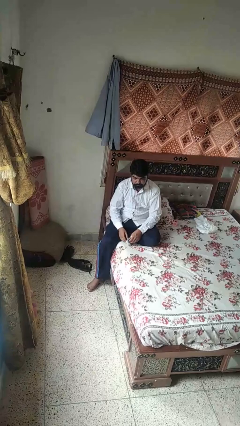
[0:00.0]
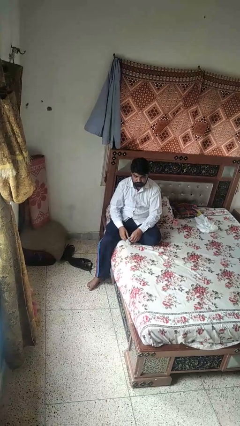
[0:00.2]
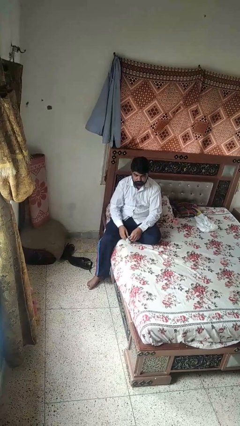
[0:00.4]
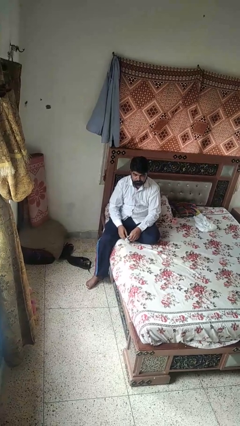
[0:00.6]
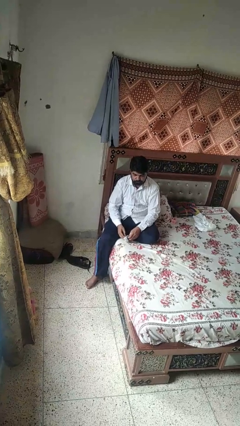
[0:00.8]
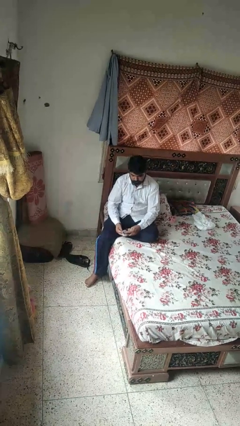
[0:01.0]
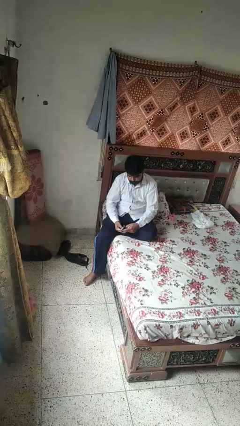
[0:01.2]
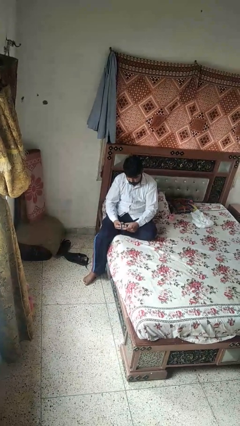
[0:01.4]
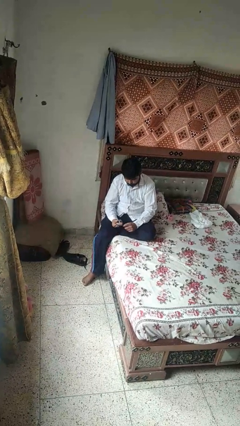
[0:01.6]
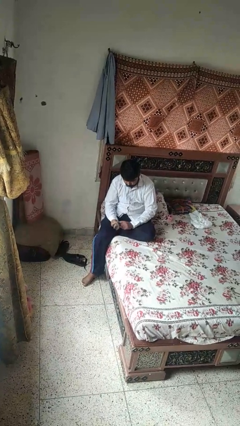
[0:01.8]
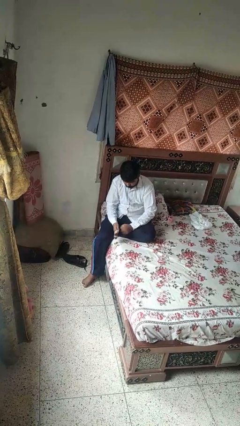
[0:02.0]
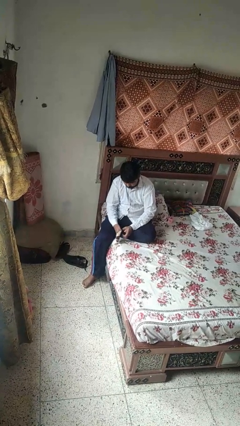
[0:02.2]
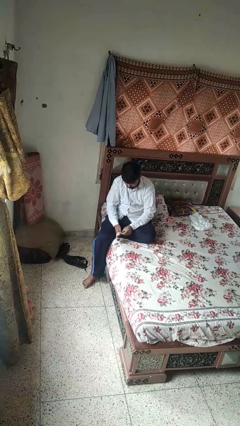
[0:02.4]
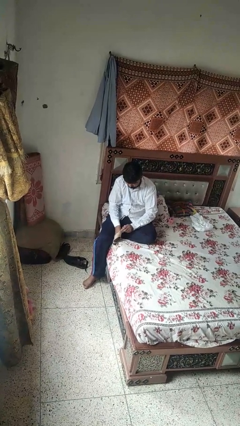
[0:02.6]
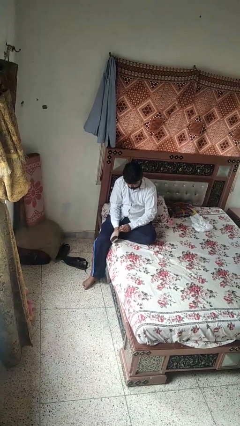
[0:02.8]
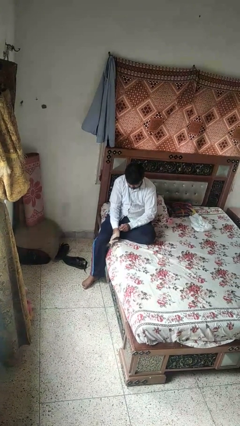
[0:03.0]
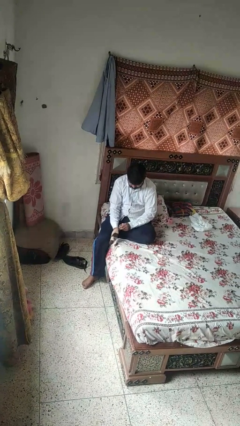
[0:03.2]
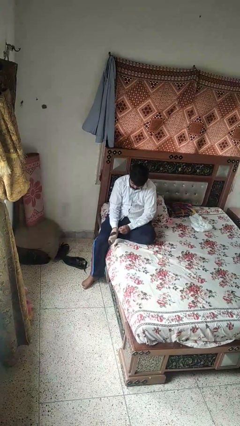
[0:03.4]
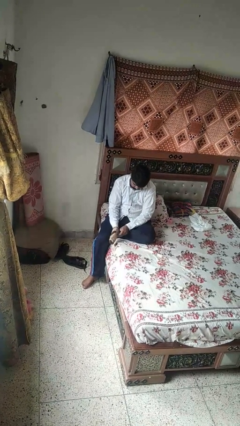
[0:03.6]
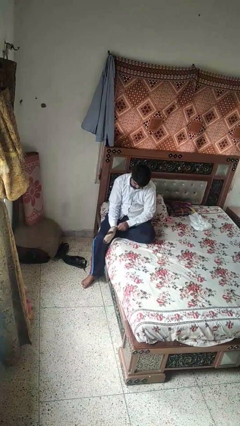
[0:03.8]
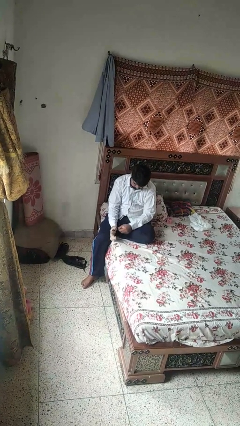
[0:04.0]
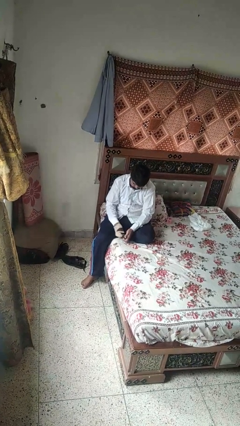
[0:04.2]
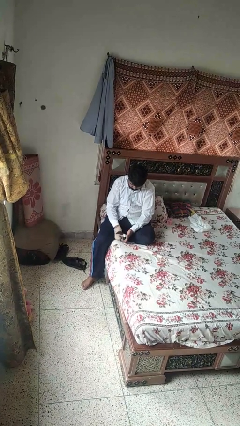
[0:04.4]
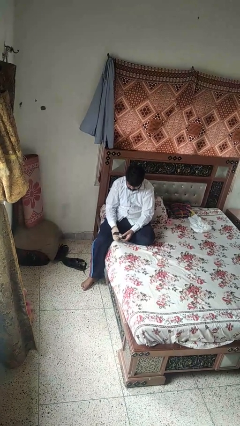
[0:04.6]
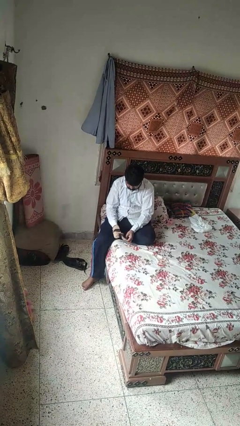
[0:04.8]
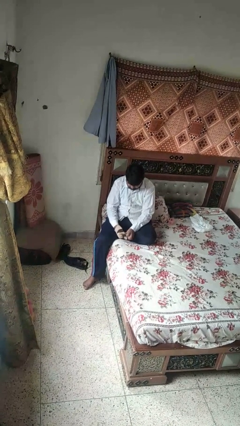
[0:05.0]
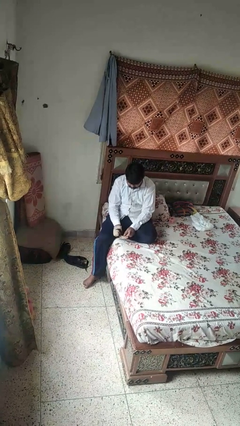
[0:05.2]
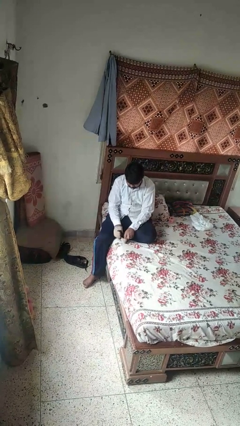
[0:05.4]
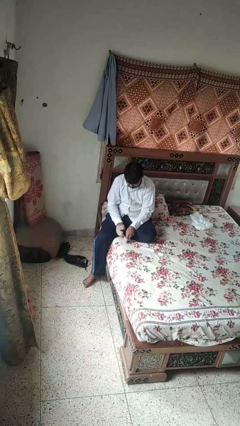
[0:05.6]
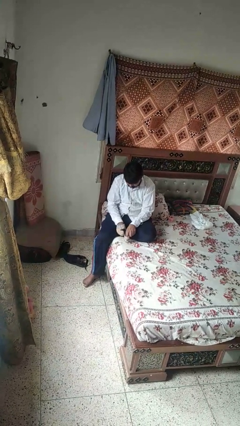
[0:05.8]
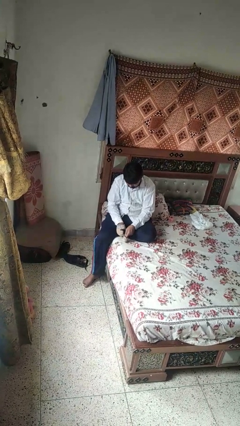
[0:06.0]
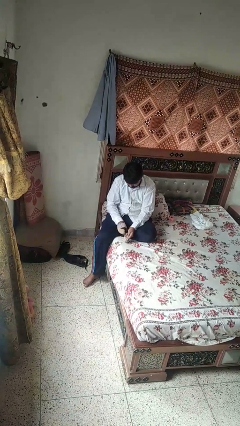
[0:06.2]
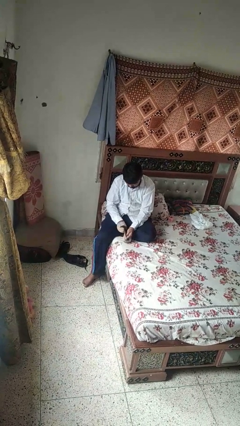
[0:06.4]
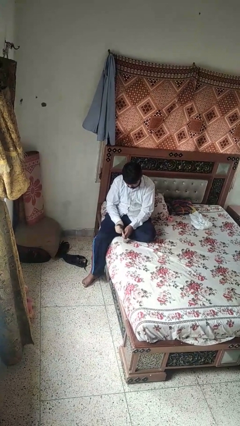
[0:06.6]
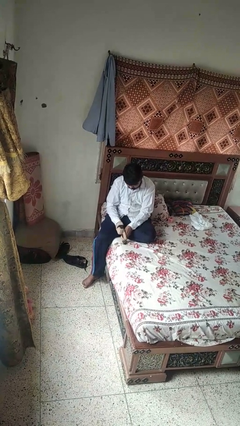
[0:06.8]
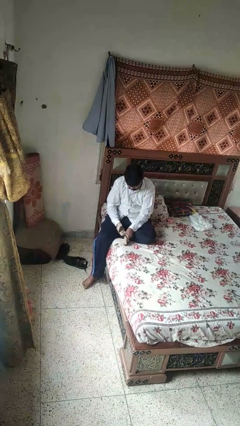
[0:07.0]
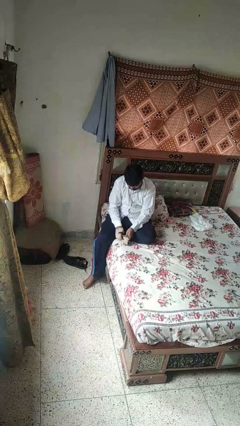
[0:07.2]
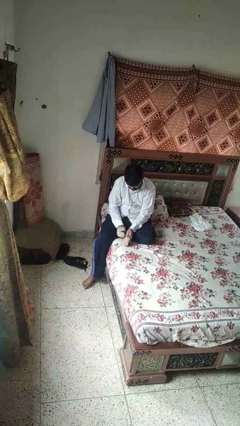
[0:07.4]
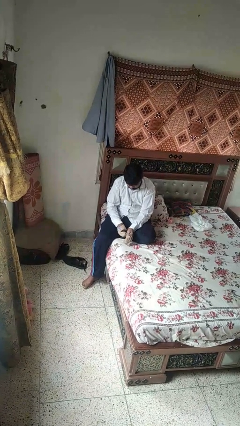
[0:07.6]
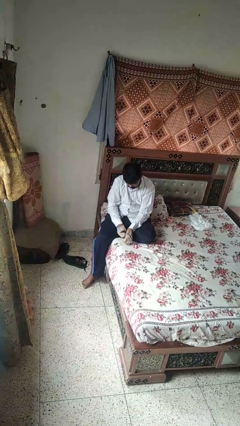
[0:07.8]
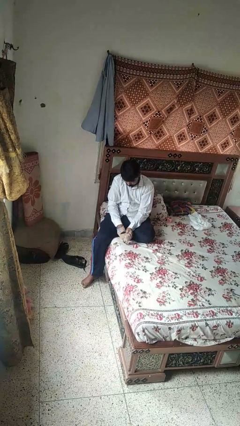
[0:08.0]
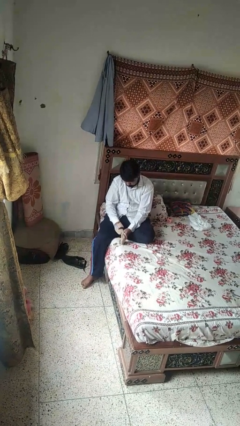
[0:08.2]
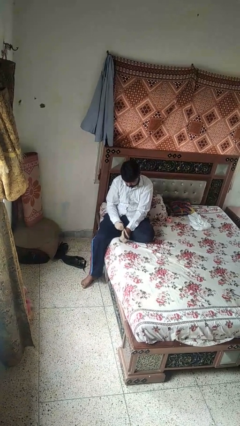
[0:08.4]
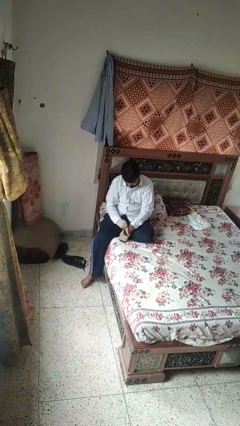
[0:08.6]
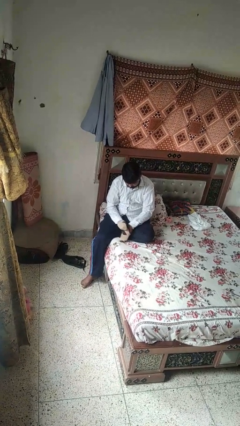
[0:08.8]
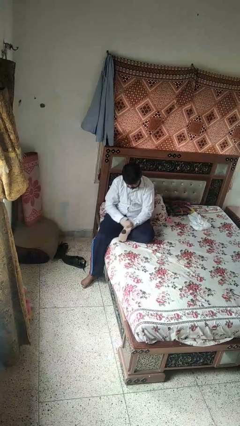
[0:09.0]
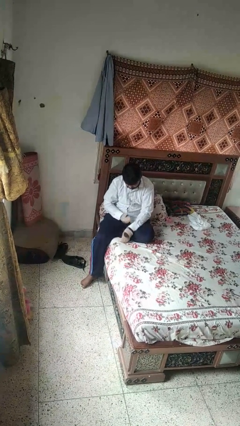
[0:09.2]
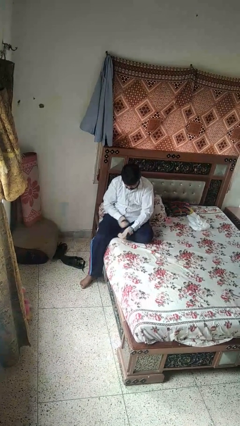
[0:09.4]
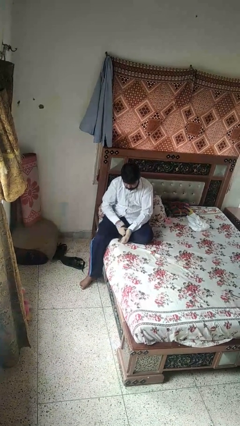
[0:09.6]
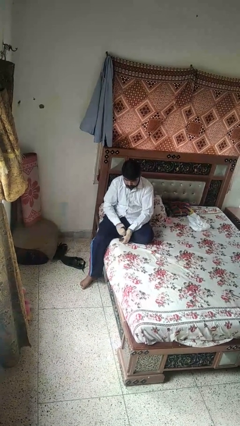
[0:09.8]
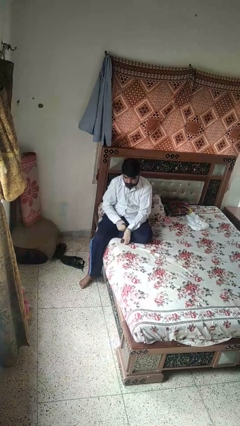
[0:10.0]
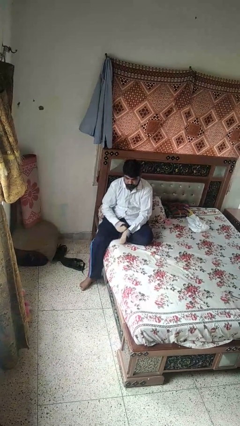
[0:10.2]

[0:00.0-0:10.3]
person puts on gloves

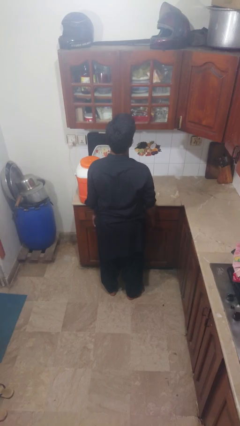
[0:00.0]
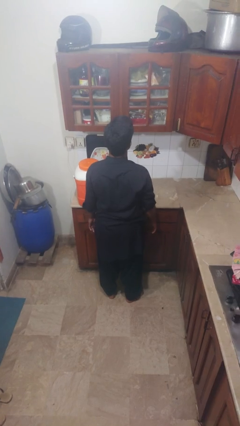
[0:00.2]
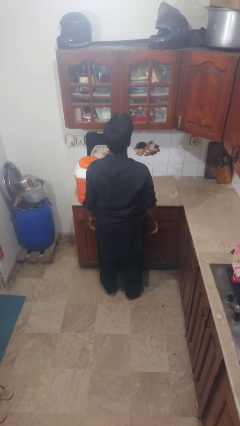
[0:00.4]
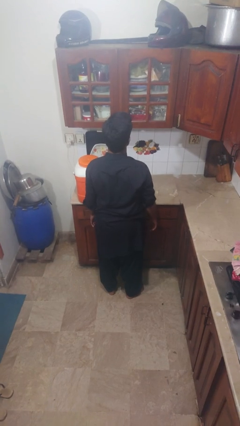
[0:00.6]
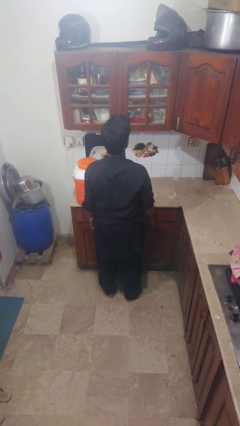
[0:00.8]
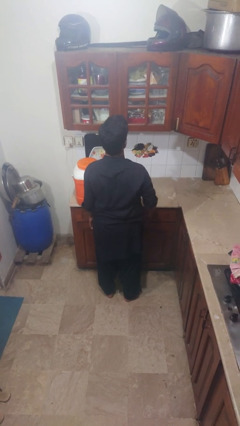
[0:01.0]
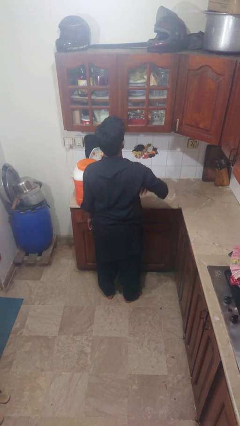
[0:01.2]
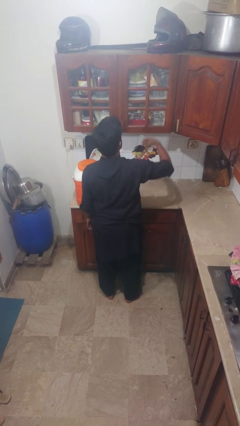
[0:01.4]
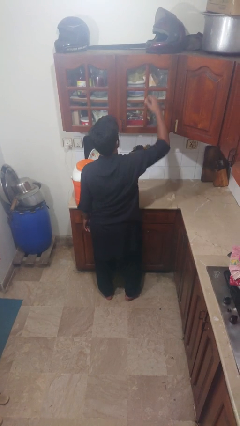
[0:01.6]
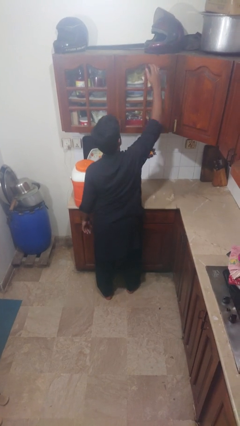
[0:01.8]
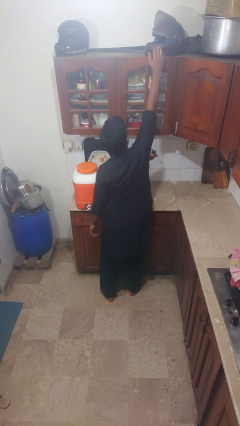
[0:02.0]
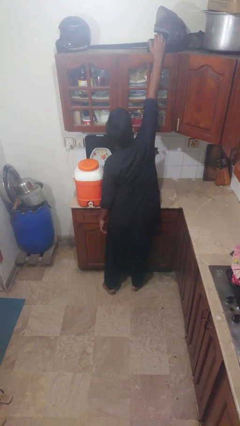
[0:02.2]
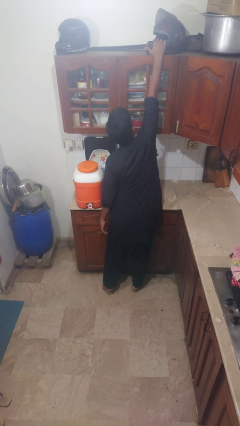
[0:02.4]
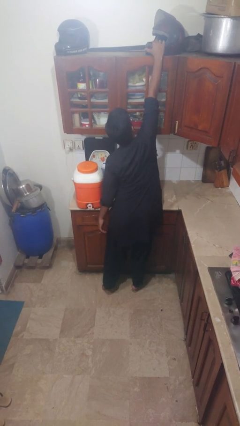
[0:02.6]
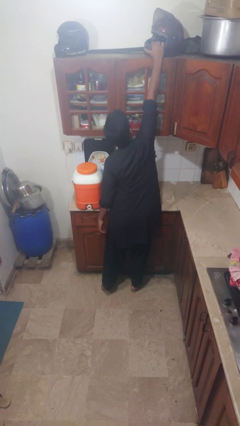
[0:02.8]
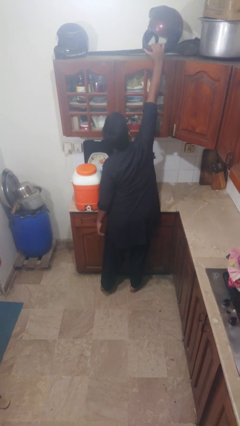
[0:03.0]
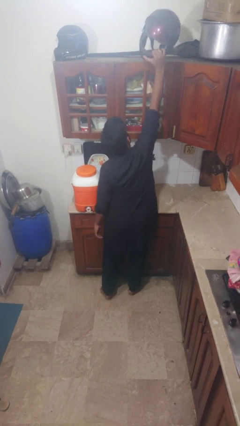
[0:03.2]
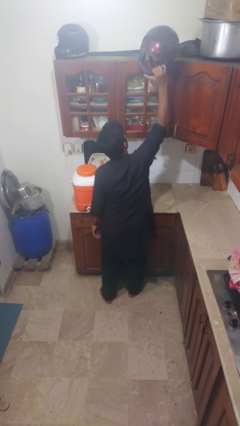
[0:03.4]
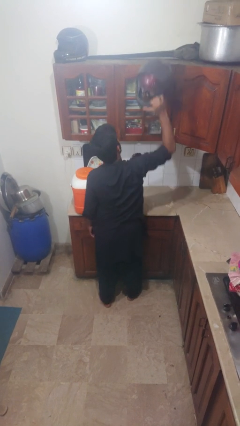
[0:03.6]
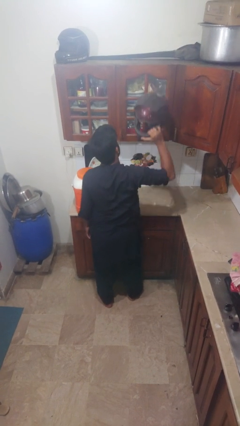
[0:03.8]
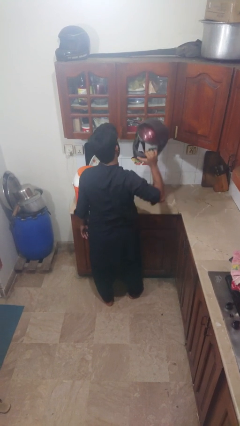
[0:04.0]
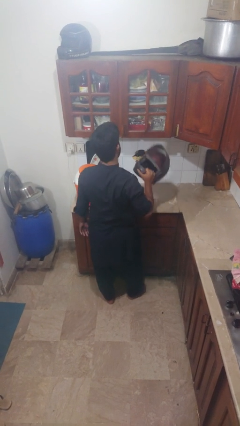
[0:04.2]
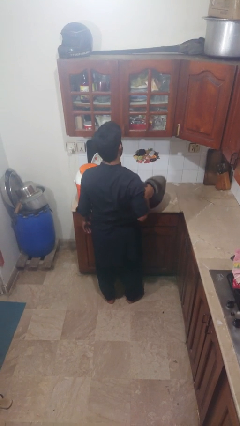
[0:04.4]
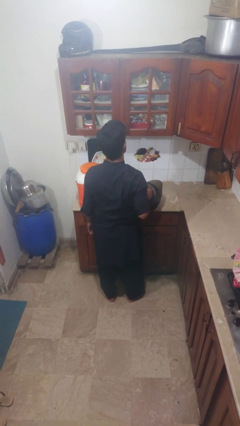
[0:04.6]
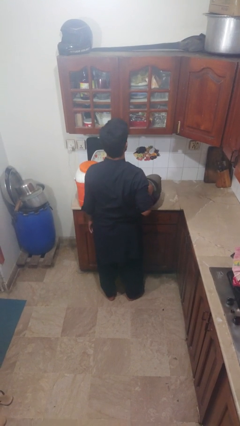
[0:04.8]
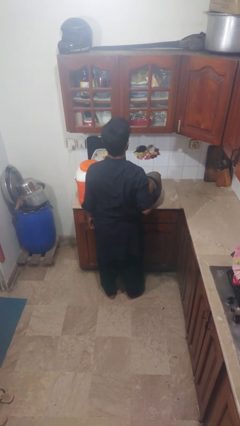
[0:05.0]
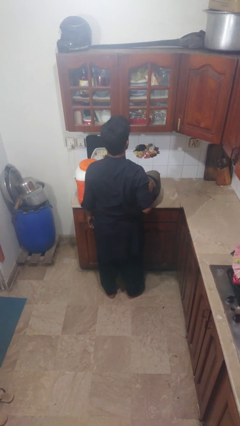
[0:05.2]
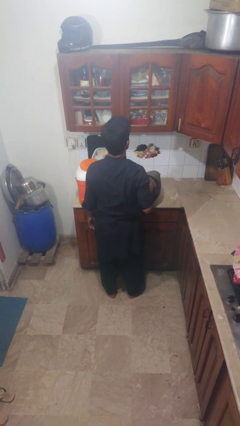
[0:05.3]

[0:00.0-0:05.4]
person picks up object from shelf

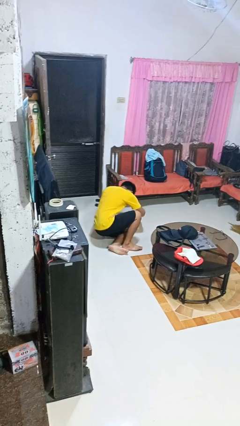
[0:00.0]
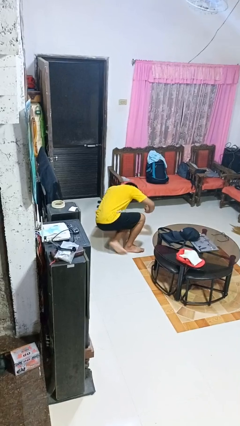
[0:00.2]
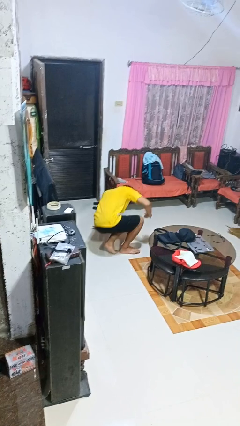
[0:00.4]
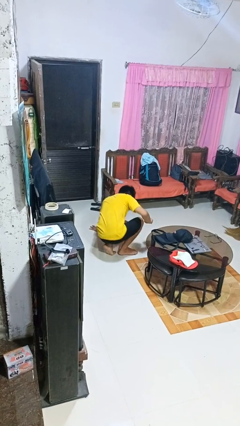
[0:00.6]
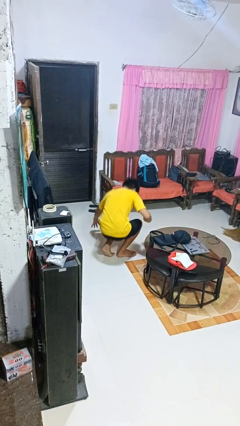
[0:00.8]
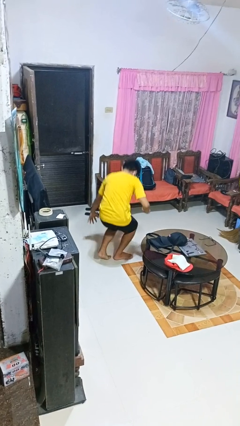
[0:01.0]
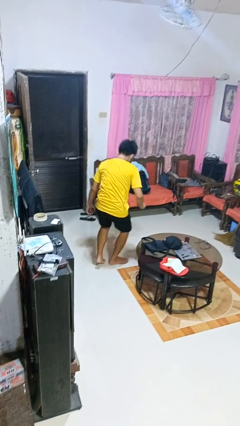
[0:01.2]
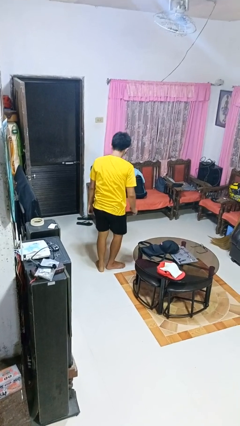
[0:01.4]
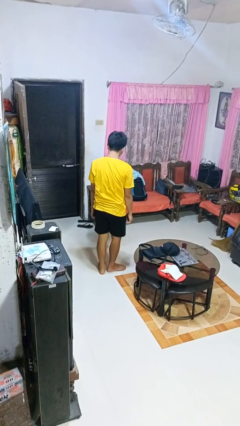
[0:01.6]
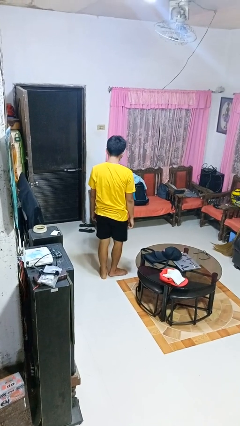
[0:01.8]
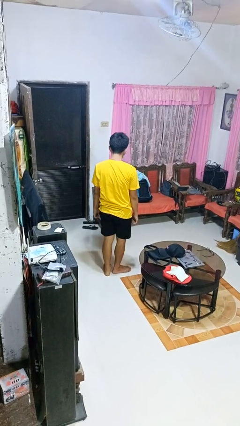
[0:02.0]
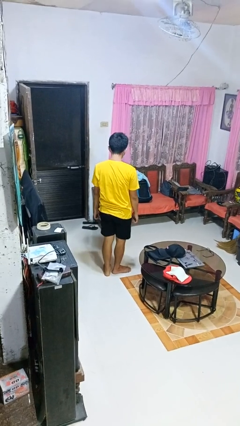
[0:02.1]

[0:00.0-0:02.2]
person stands up from floor
